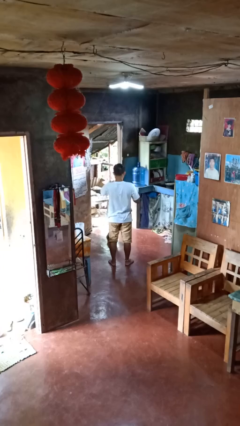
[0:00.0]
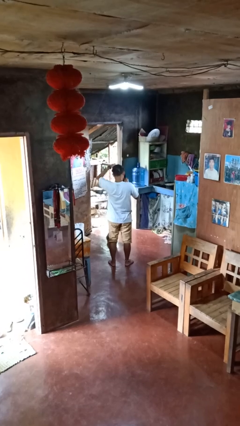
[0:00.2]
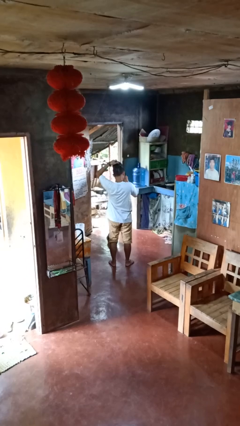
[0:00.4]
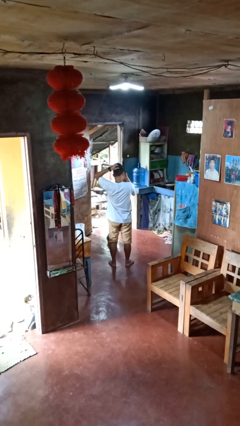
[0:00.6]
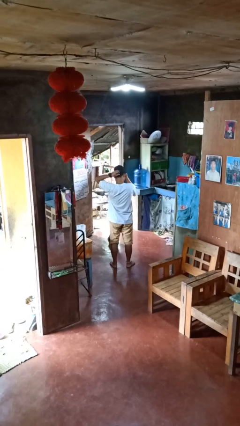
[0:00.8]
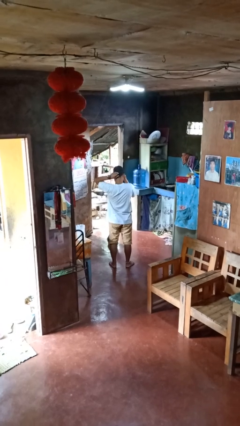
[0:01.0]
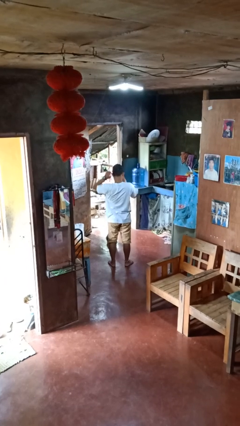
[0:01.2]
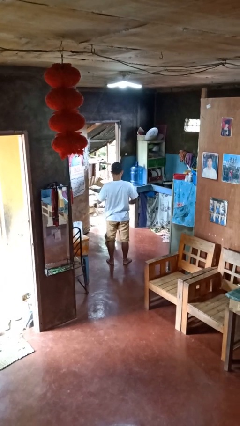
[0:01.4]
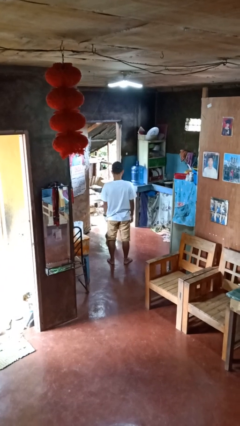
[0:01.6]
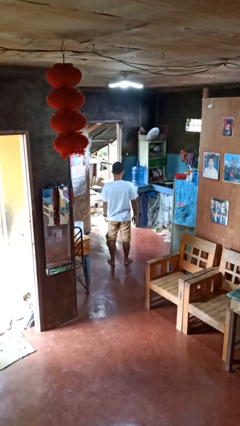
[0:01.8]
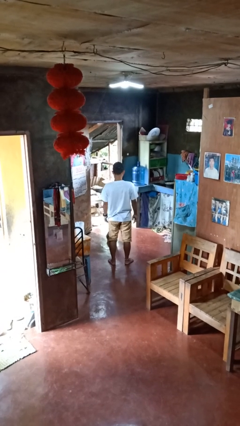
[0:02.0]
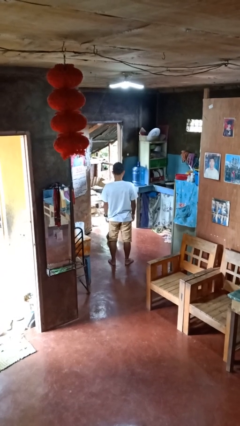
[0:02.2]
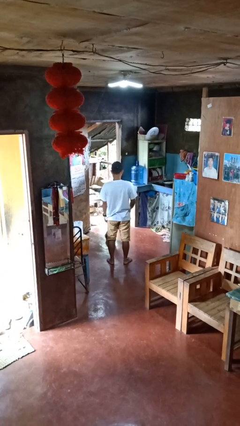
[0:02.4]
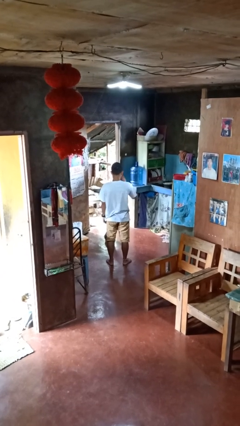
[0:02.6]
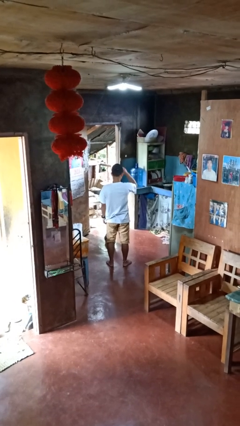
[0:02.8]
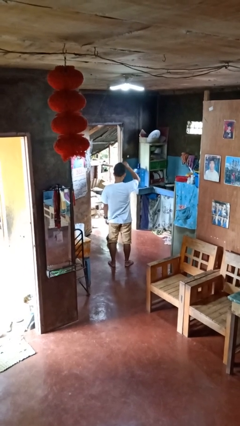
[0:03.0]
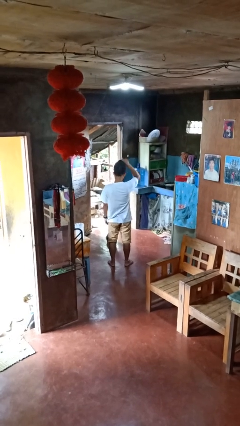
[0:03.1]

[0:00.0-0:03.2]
person puts on hat

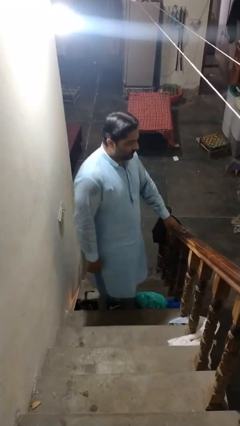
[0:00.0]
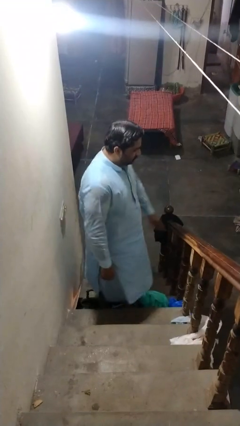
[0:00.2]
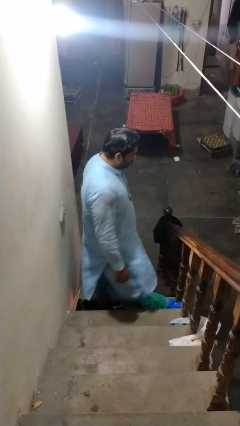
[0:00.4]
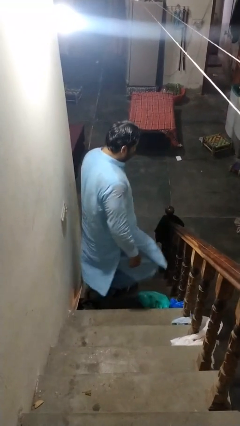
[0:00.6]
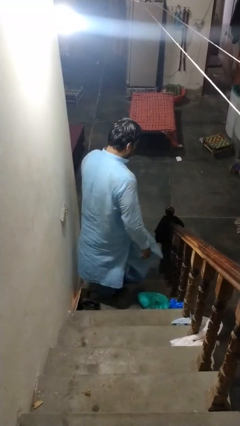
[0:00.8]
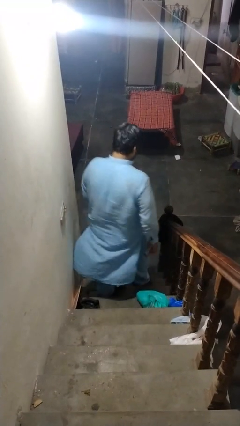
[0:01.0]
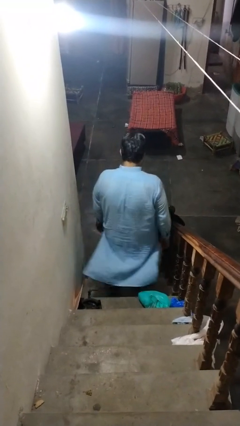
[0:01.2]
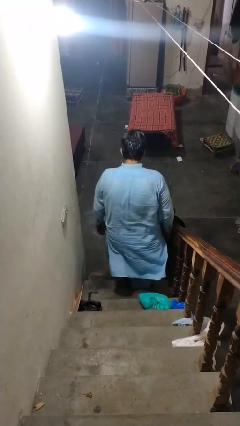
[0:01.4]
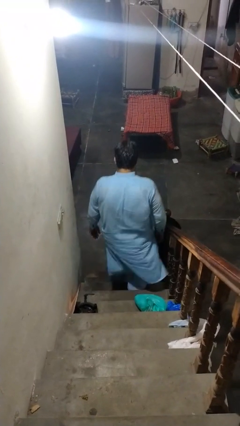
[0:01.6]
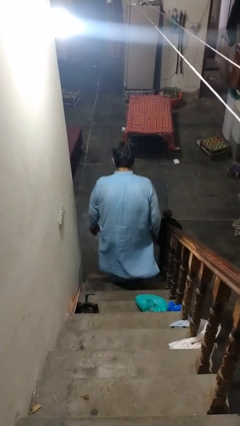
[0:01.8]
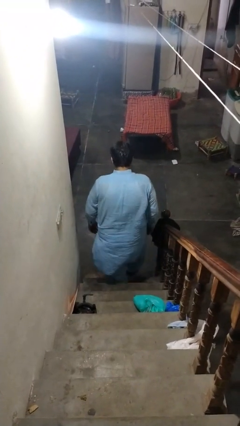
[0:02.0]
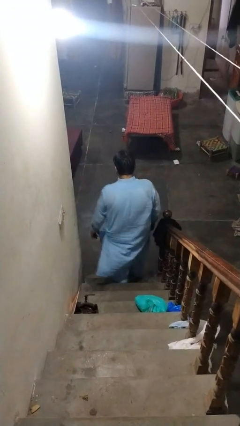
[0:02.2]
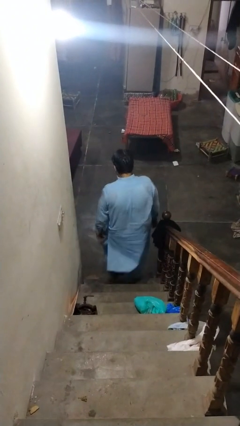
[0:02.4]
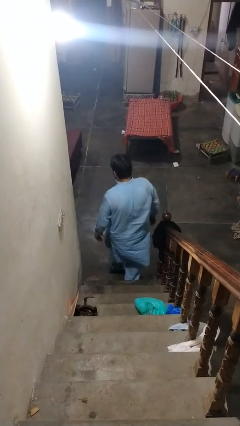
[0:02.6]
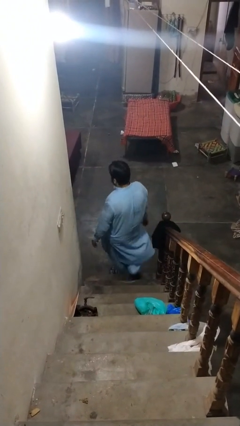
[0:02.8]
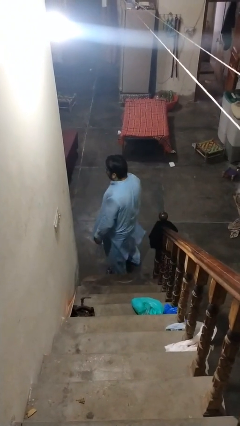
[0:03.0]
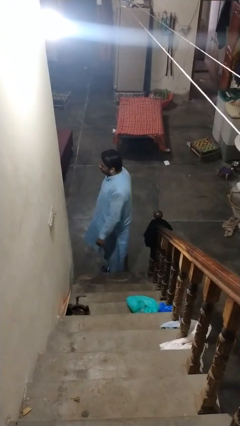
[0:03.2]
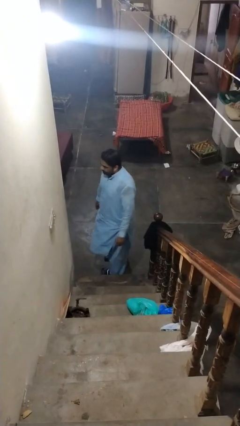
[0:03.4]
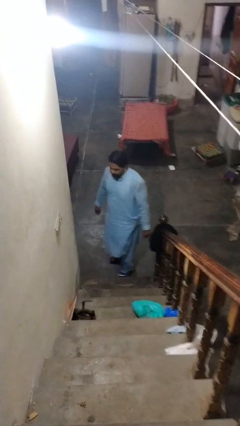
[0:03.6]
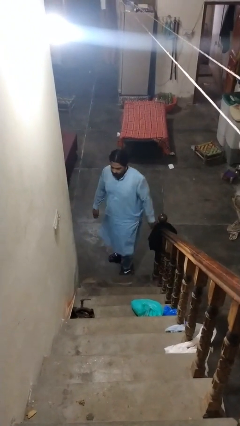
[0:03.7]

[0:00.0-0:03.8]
person climbs down stairs

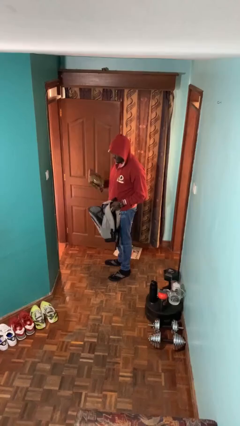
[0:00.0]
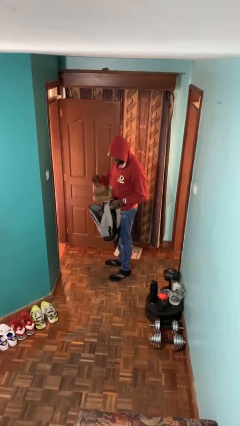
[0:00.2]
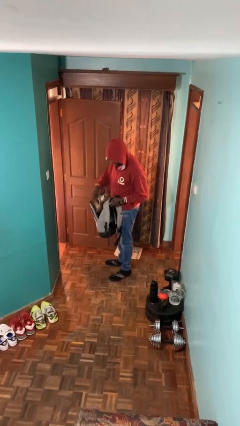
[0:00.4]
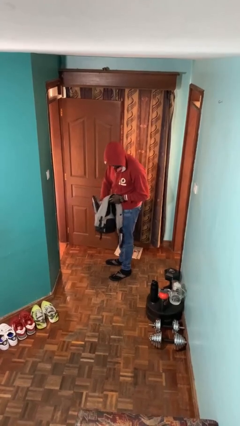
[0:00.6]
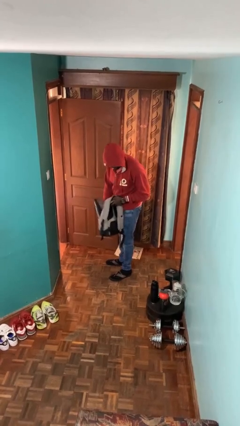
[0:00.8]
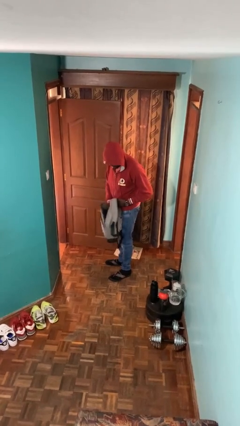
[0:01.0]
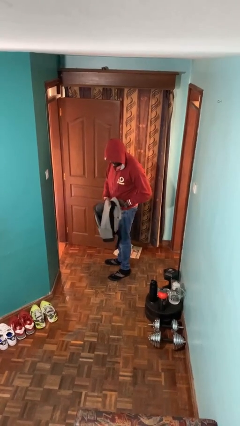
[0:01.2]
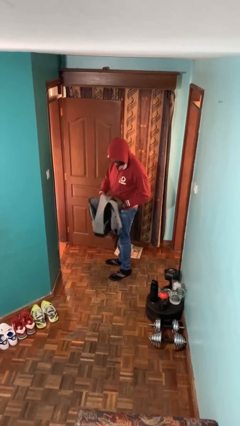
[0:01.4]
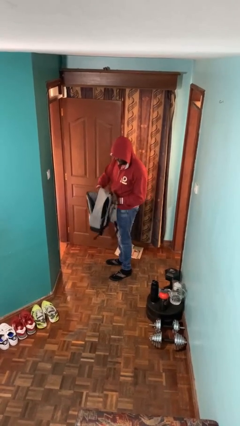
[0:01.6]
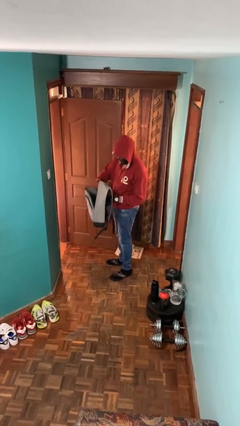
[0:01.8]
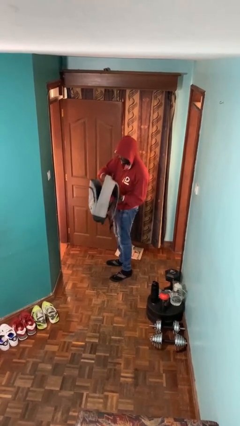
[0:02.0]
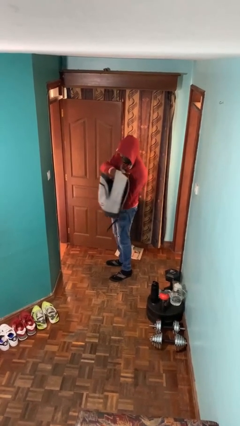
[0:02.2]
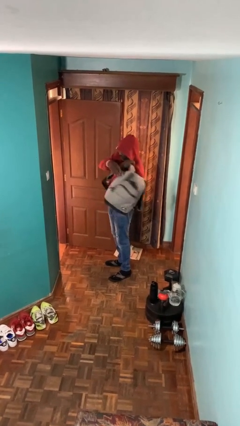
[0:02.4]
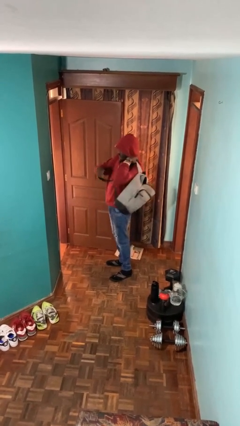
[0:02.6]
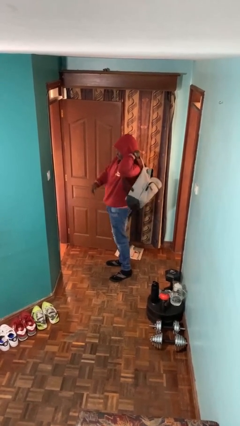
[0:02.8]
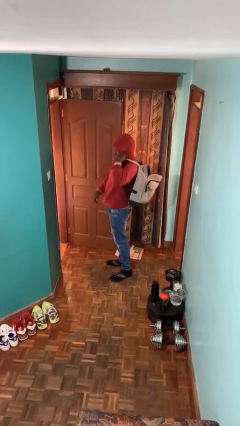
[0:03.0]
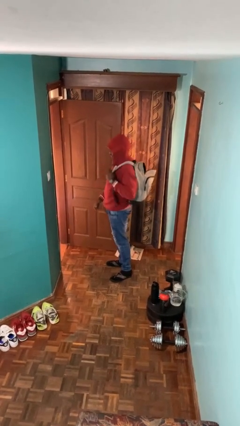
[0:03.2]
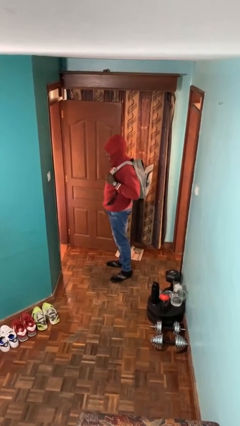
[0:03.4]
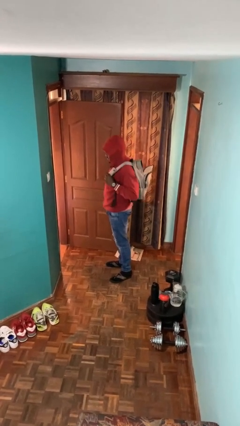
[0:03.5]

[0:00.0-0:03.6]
person puts object into backpack

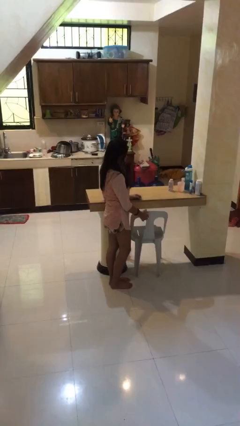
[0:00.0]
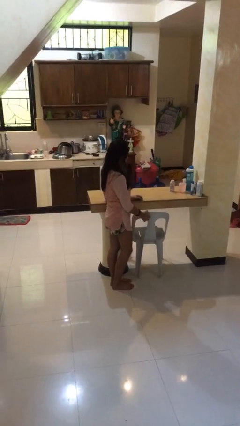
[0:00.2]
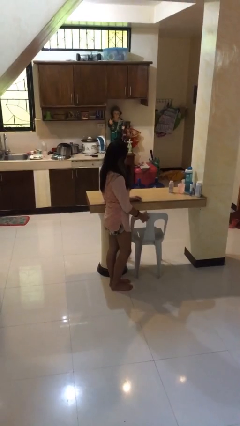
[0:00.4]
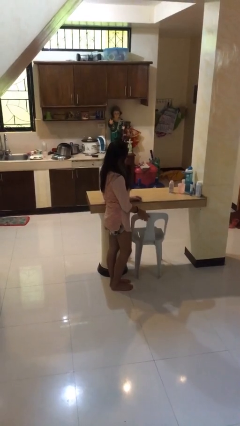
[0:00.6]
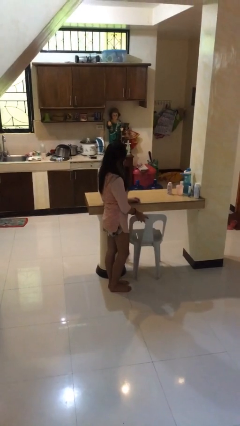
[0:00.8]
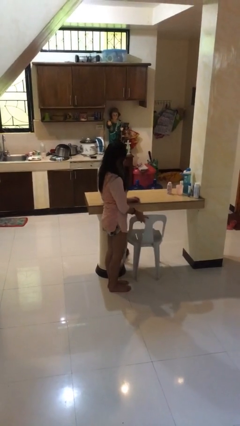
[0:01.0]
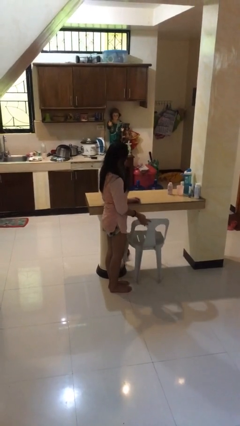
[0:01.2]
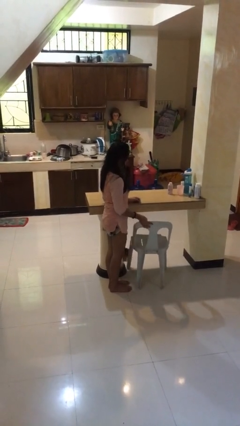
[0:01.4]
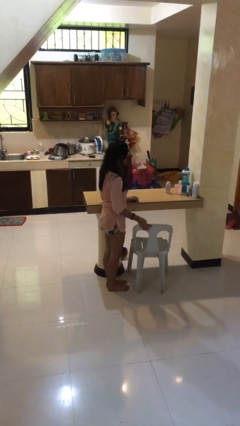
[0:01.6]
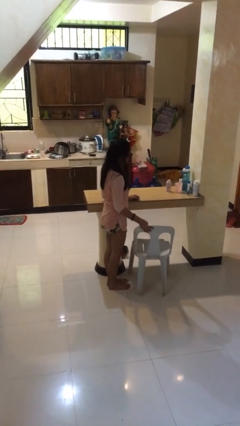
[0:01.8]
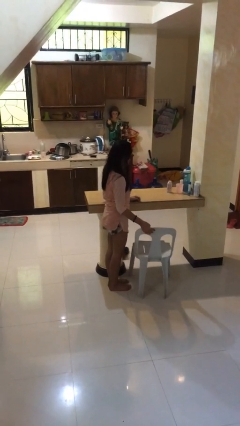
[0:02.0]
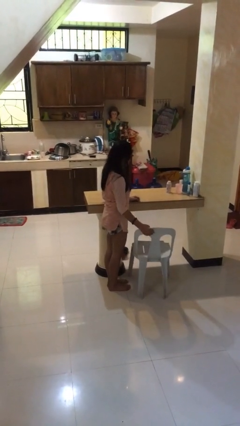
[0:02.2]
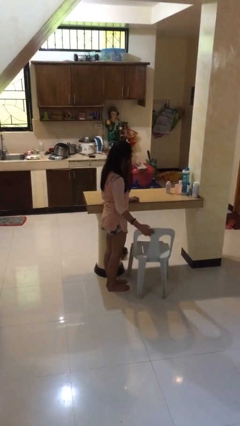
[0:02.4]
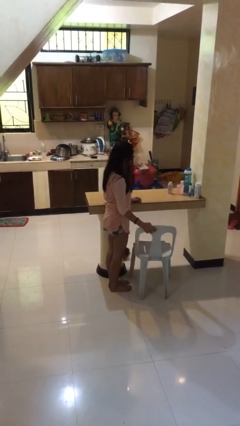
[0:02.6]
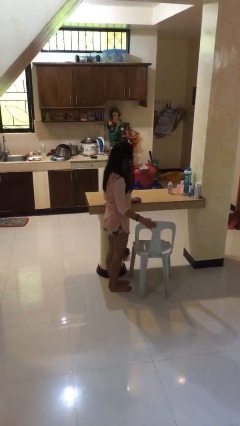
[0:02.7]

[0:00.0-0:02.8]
person pulls out chair

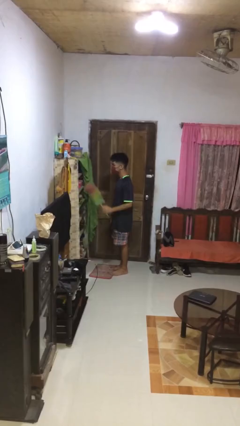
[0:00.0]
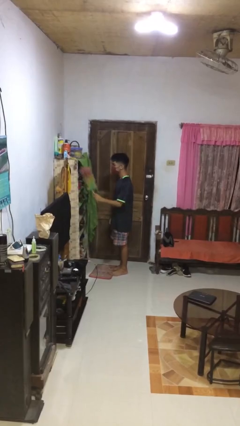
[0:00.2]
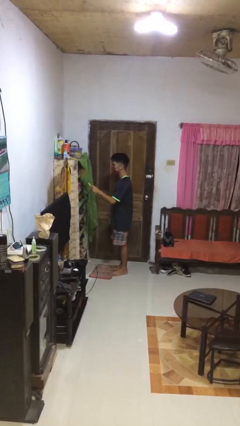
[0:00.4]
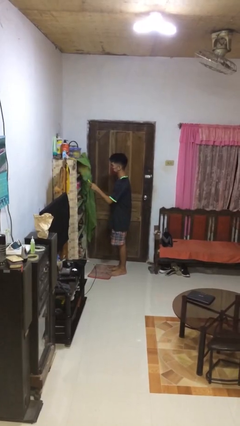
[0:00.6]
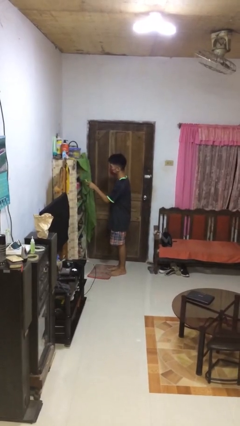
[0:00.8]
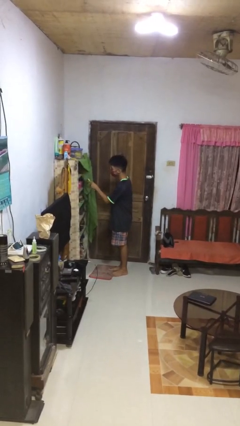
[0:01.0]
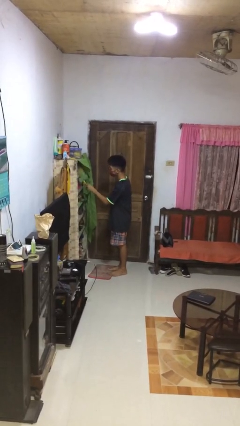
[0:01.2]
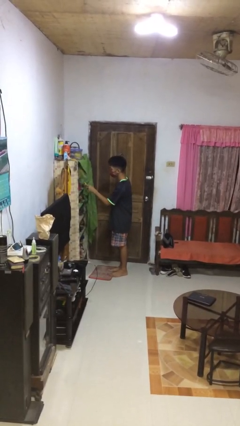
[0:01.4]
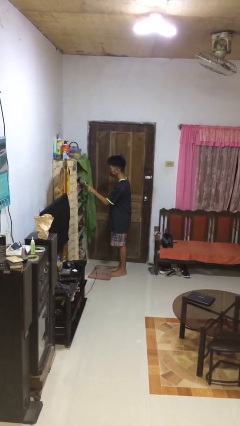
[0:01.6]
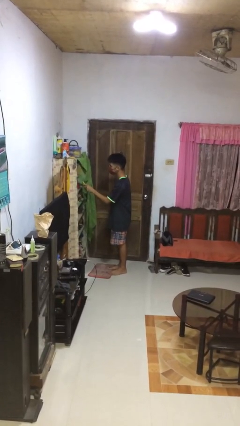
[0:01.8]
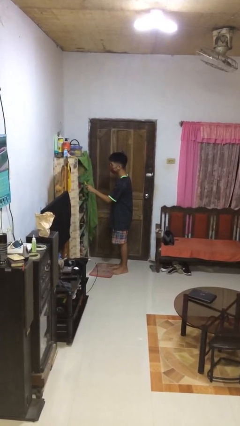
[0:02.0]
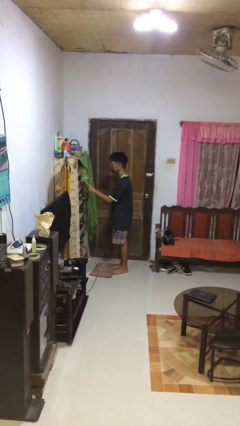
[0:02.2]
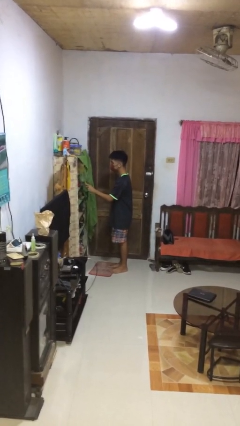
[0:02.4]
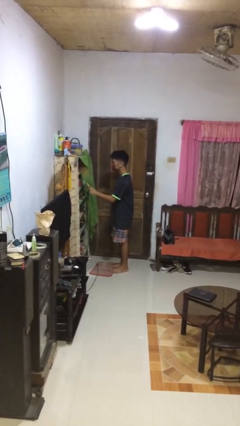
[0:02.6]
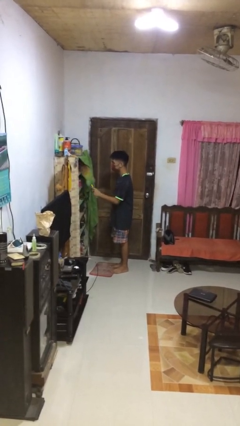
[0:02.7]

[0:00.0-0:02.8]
person dusts furniture

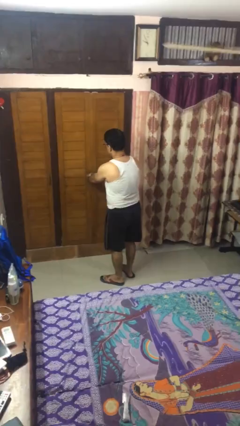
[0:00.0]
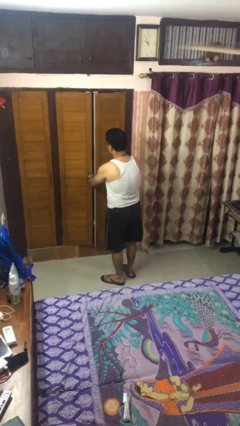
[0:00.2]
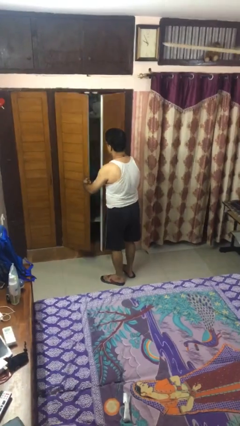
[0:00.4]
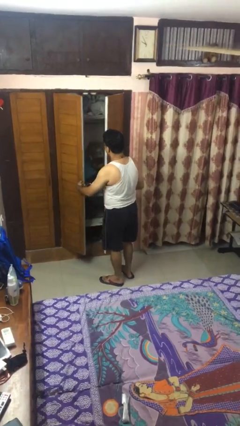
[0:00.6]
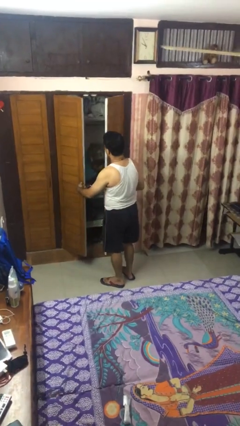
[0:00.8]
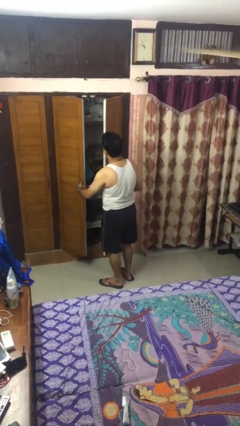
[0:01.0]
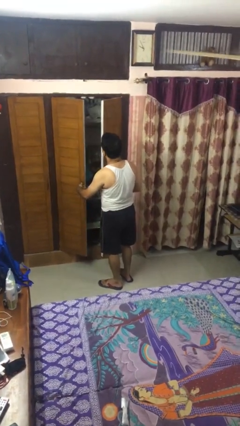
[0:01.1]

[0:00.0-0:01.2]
person opens facility door

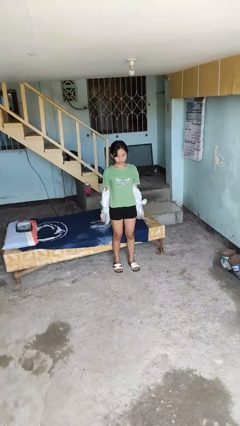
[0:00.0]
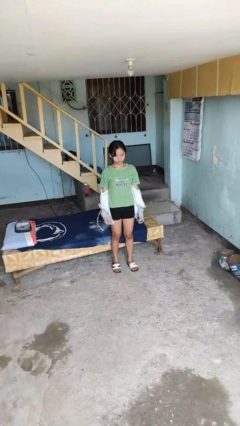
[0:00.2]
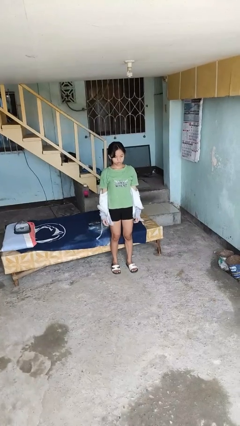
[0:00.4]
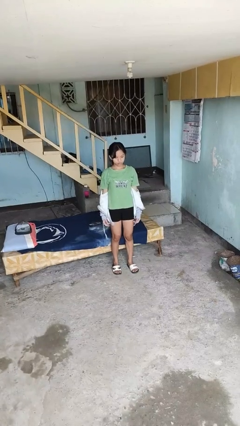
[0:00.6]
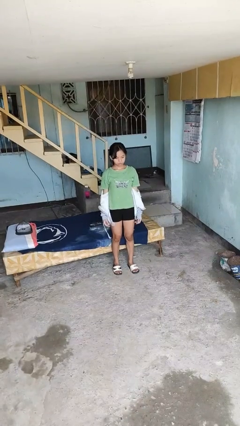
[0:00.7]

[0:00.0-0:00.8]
person takes off jacket
